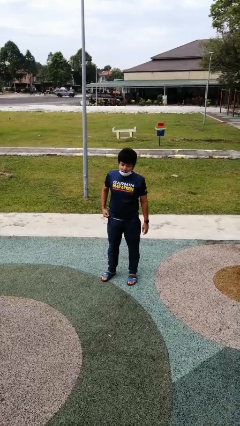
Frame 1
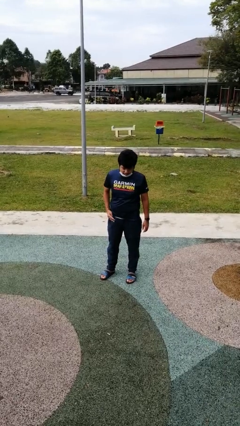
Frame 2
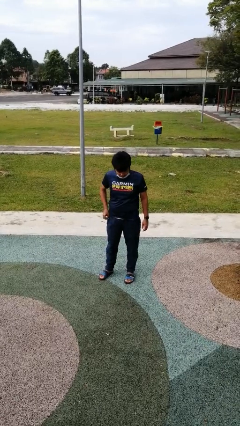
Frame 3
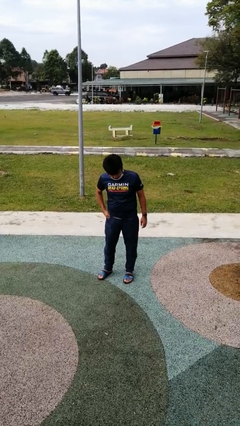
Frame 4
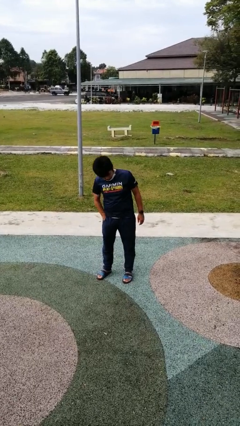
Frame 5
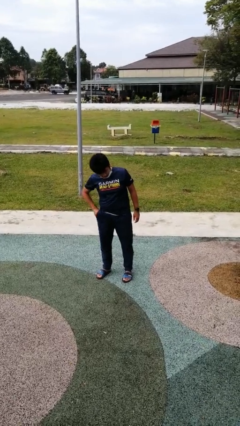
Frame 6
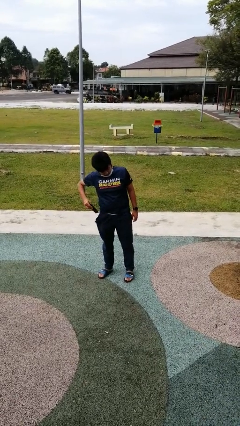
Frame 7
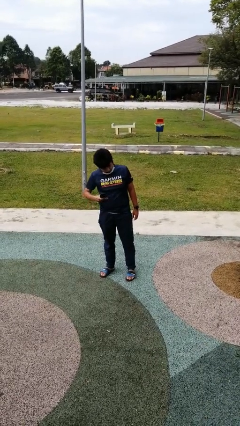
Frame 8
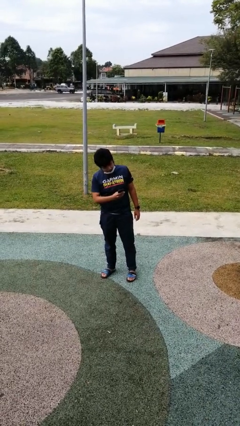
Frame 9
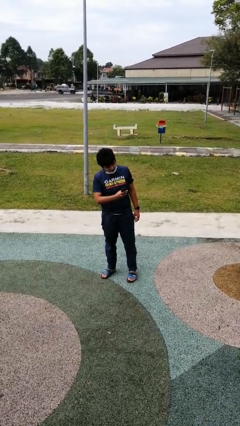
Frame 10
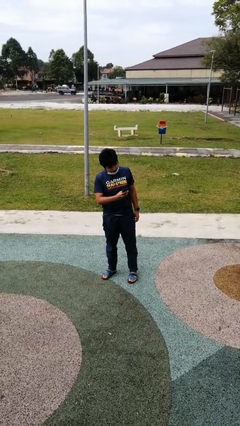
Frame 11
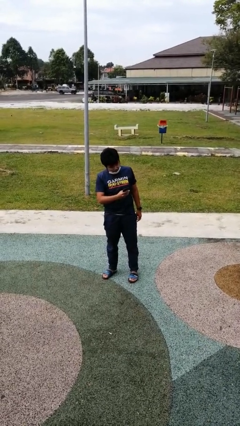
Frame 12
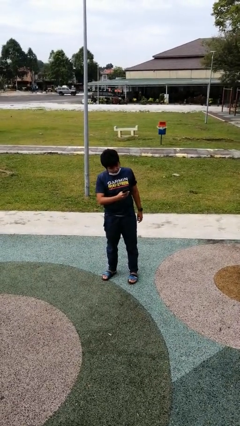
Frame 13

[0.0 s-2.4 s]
person takes phone from pocket

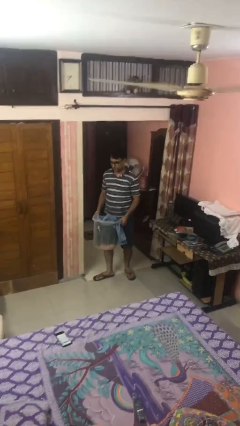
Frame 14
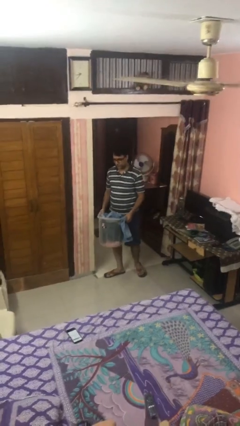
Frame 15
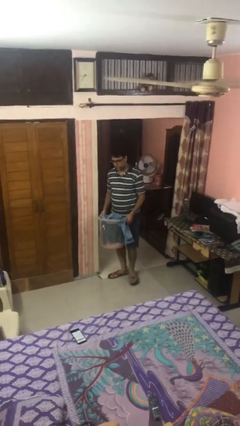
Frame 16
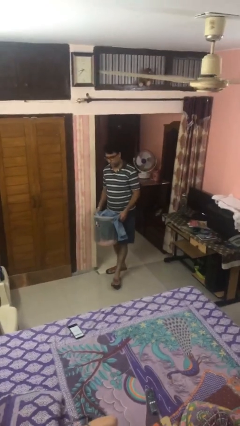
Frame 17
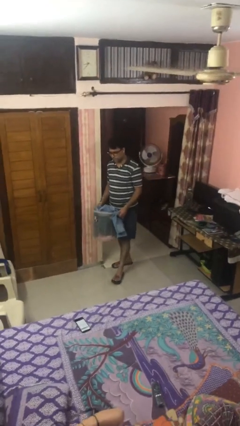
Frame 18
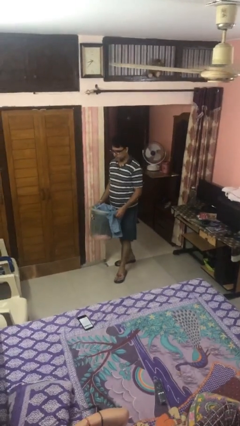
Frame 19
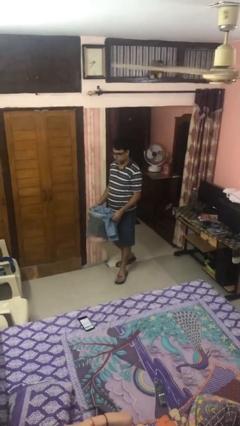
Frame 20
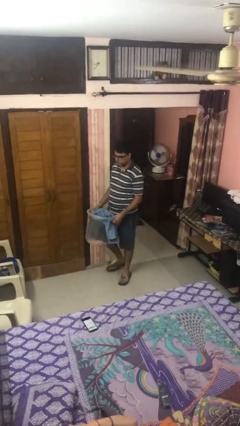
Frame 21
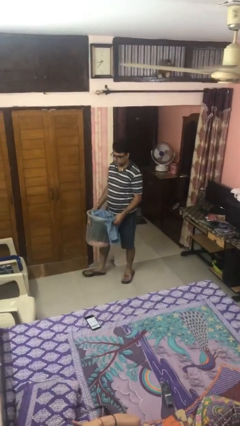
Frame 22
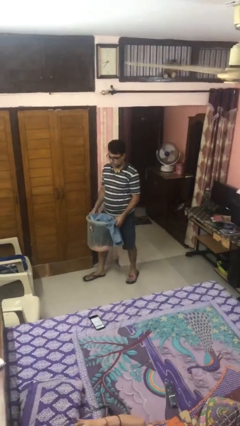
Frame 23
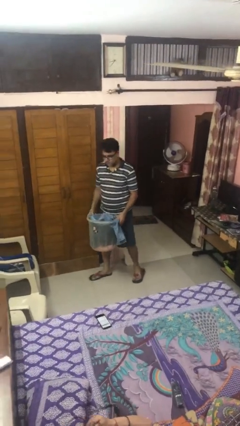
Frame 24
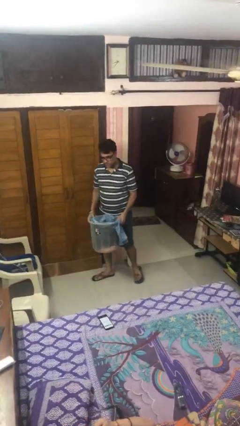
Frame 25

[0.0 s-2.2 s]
person carries laundry basket

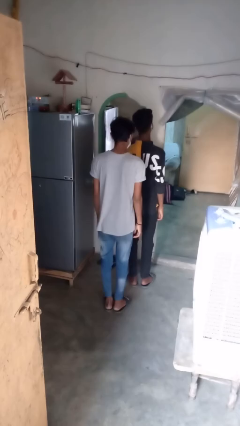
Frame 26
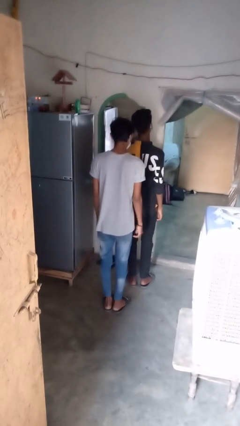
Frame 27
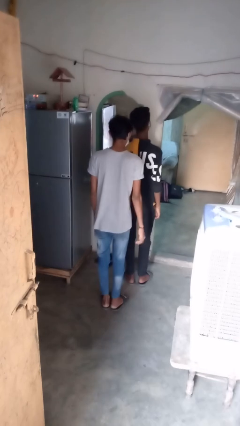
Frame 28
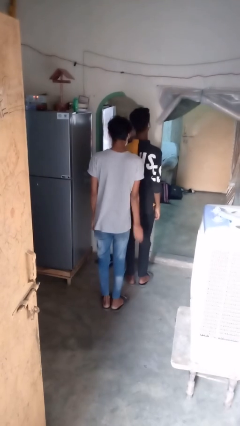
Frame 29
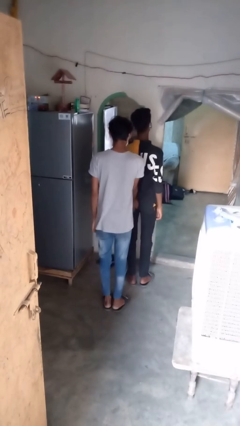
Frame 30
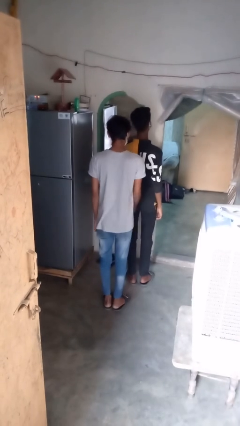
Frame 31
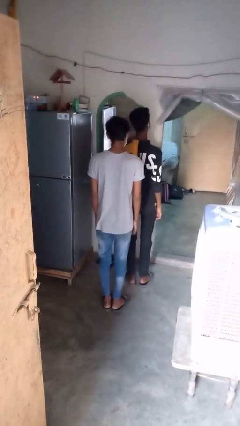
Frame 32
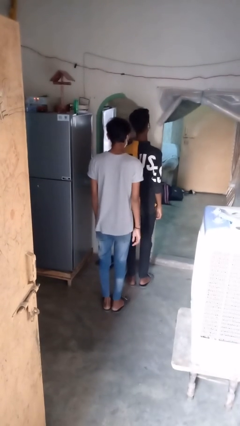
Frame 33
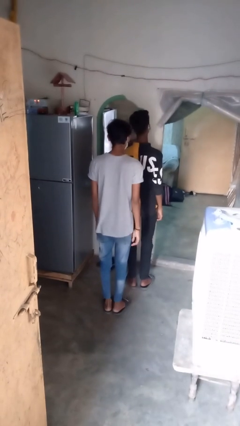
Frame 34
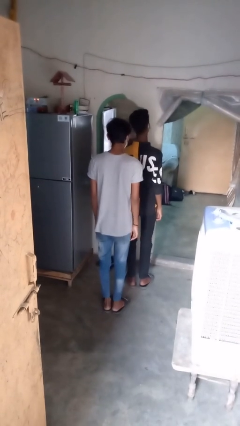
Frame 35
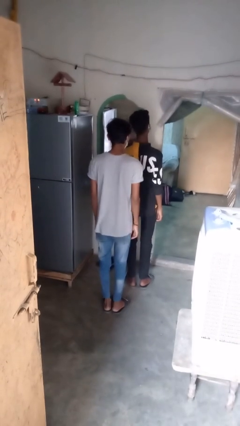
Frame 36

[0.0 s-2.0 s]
person bumps into person

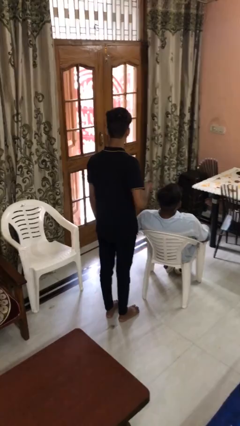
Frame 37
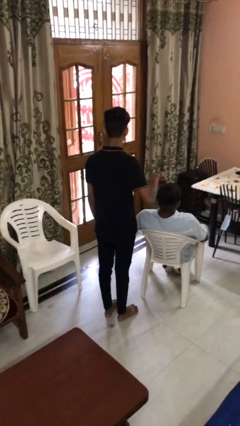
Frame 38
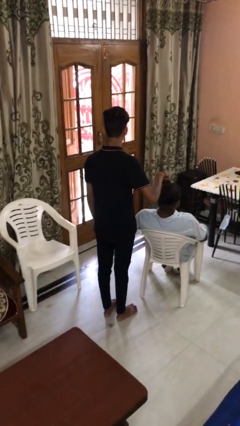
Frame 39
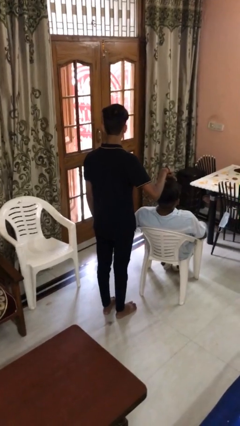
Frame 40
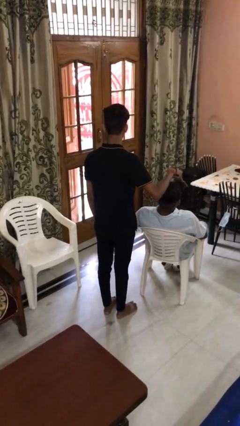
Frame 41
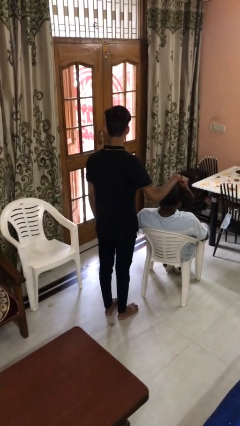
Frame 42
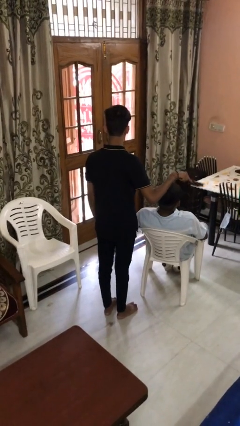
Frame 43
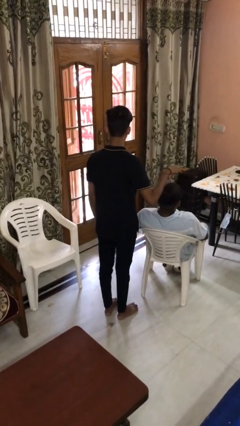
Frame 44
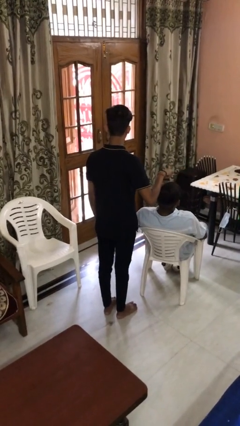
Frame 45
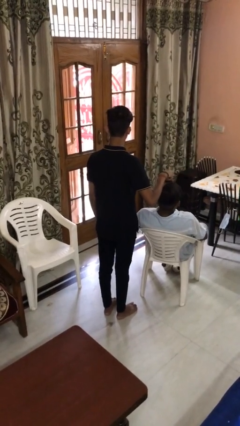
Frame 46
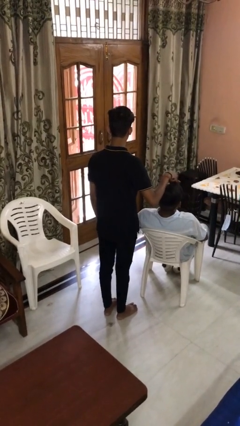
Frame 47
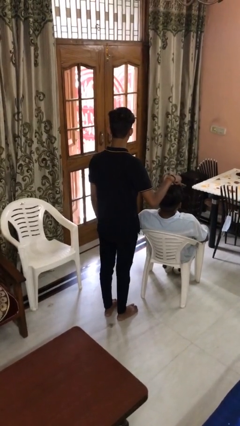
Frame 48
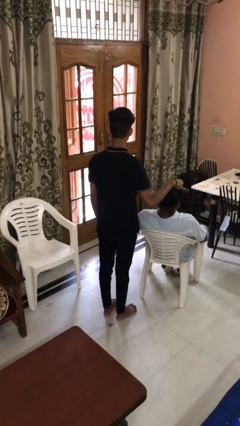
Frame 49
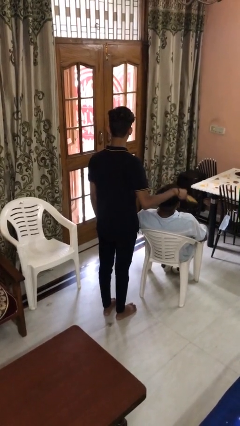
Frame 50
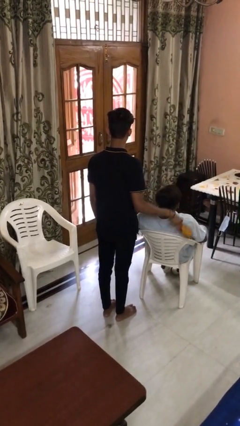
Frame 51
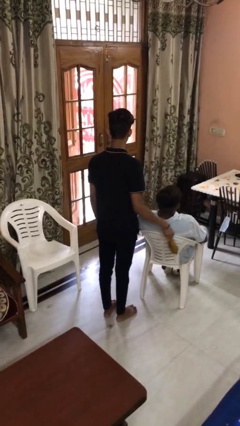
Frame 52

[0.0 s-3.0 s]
person brushes hair of person

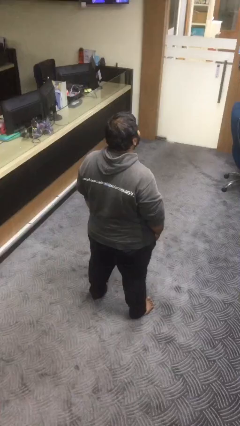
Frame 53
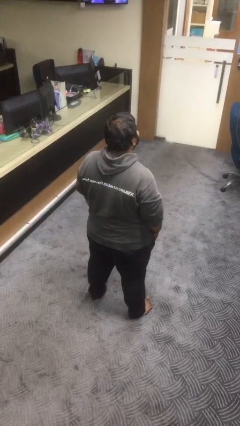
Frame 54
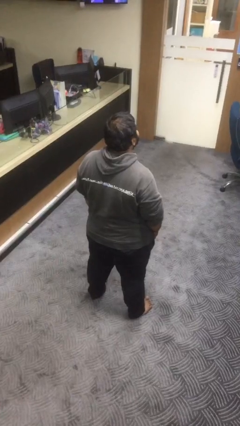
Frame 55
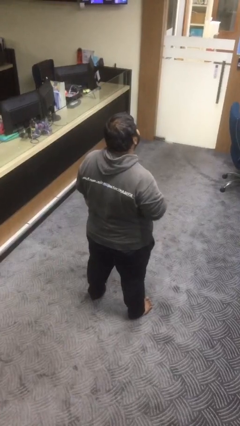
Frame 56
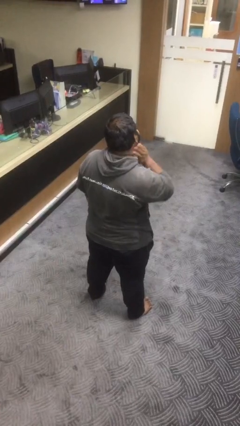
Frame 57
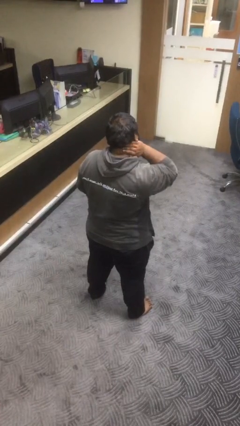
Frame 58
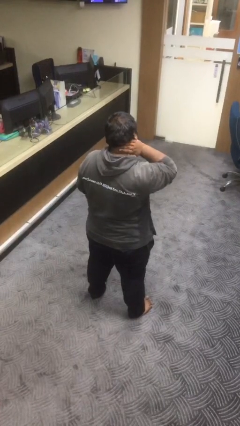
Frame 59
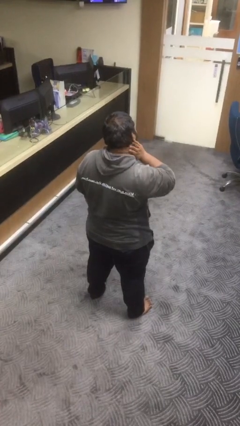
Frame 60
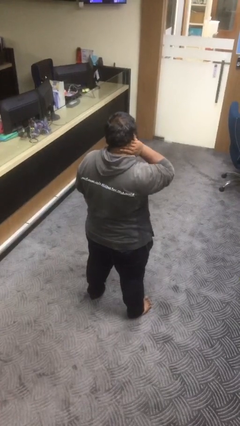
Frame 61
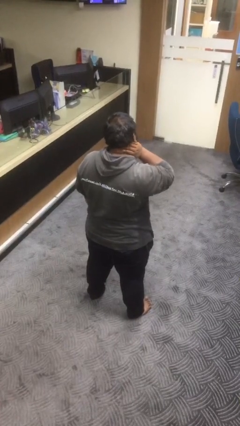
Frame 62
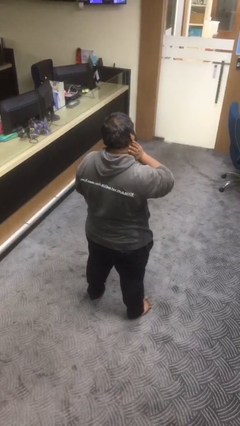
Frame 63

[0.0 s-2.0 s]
person rubs neck

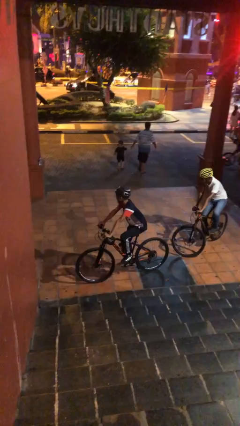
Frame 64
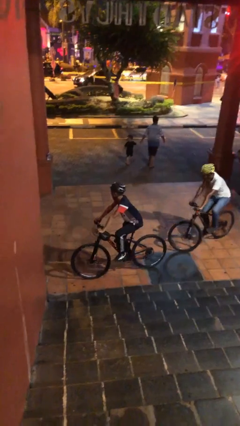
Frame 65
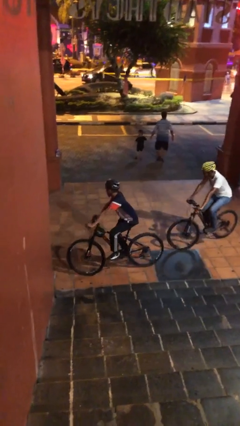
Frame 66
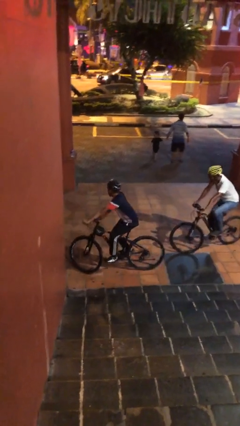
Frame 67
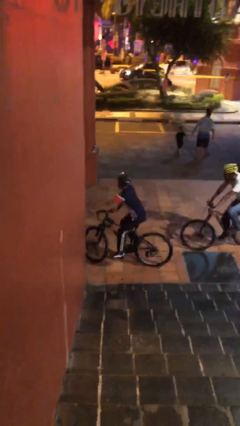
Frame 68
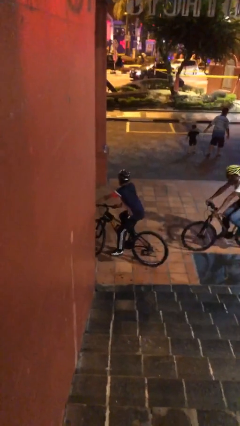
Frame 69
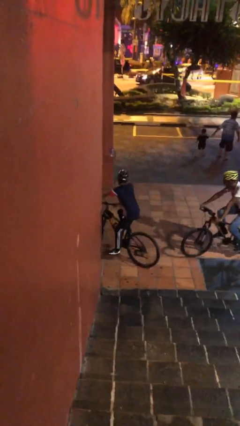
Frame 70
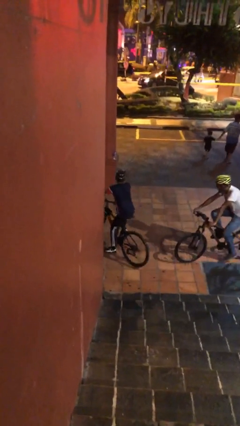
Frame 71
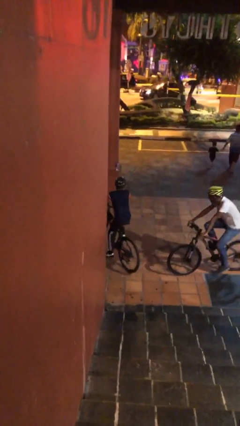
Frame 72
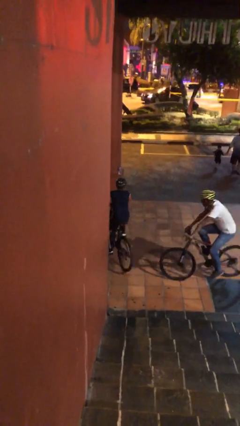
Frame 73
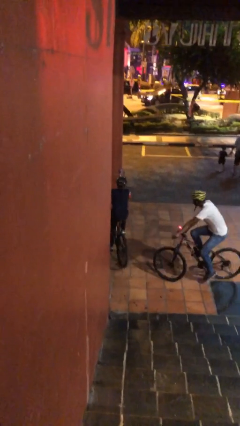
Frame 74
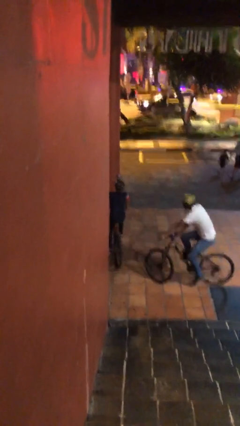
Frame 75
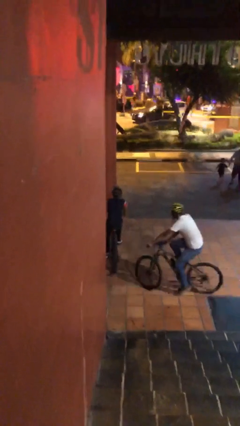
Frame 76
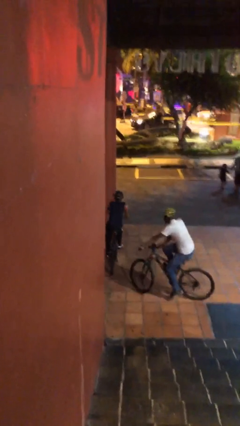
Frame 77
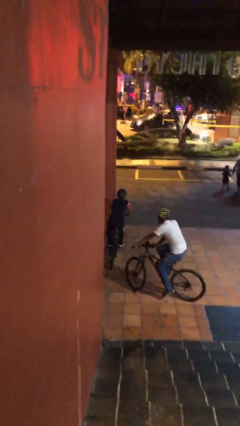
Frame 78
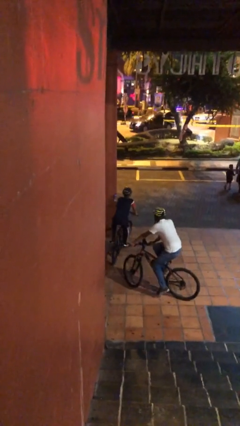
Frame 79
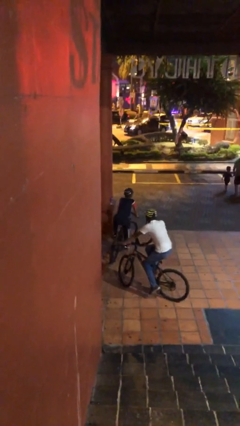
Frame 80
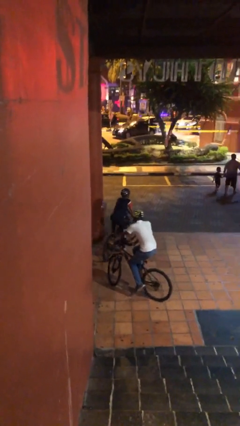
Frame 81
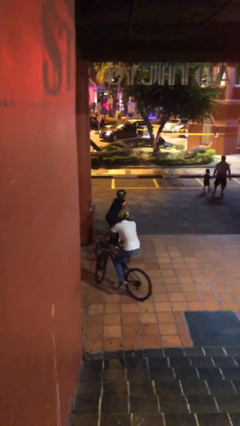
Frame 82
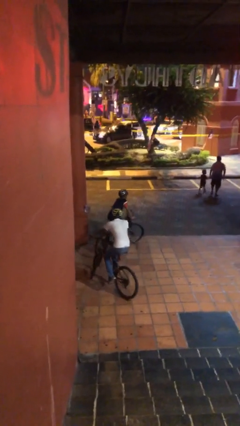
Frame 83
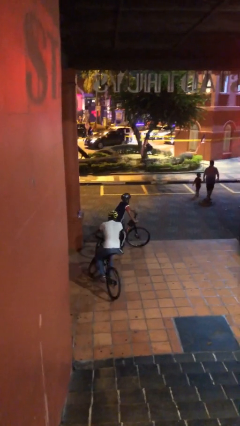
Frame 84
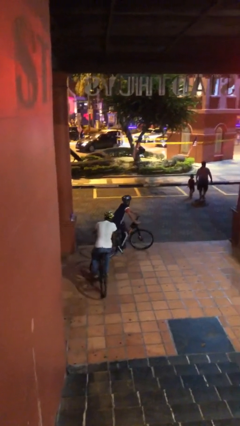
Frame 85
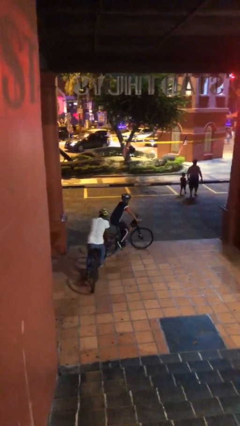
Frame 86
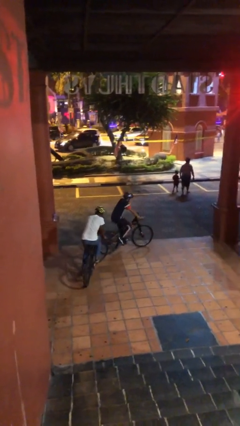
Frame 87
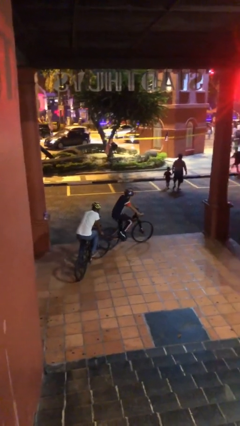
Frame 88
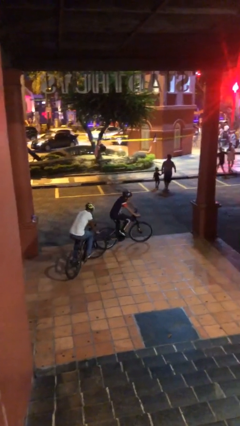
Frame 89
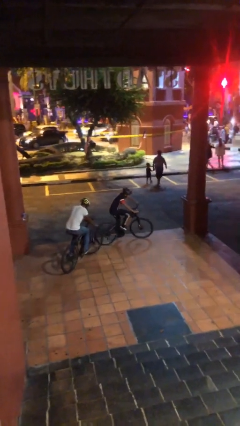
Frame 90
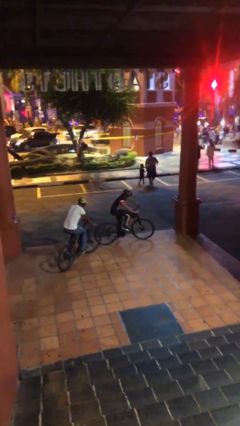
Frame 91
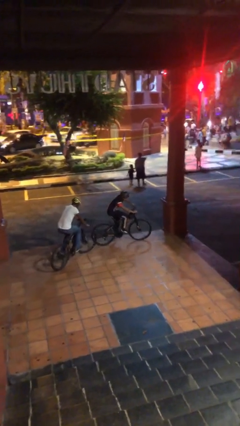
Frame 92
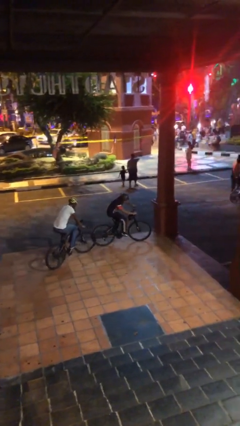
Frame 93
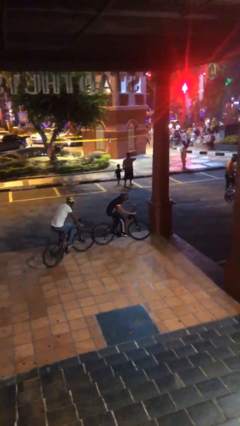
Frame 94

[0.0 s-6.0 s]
person rides bicycle
